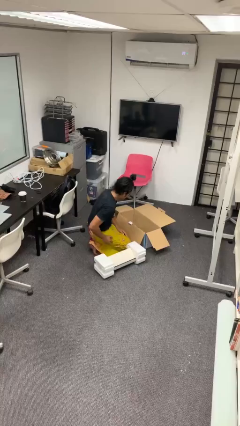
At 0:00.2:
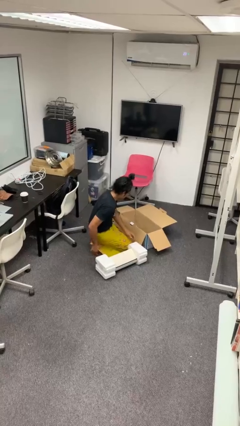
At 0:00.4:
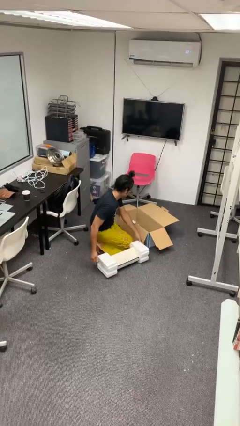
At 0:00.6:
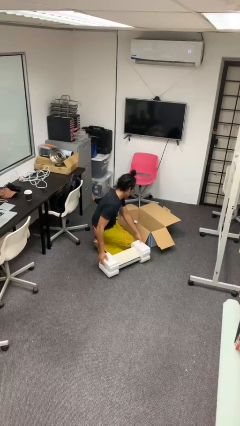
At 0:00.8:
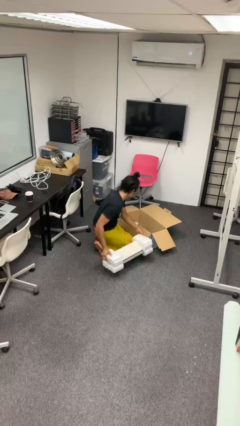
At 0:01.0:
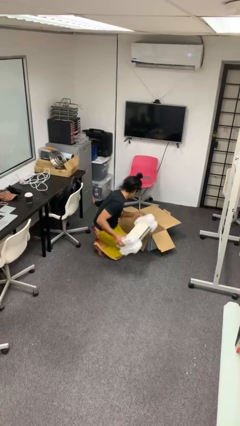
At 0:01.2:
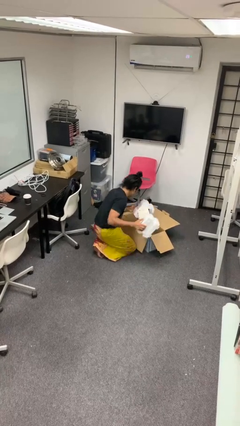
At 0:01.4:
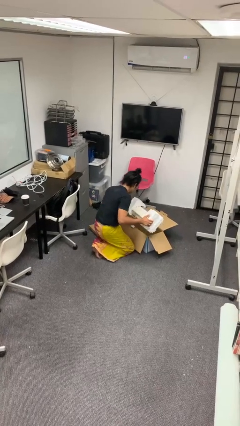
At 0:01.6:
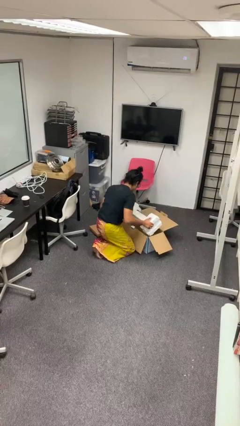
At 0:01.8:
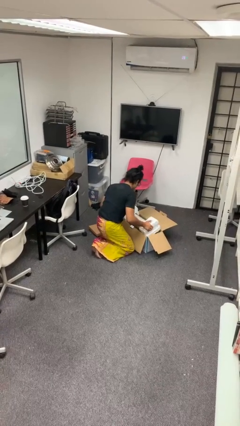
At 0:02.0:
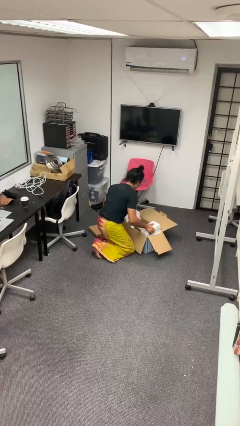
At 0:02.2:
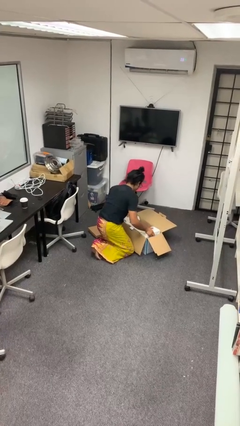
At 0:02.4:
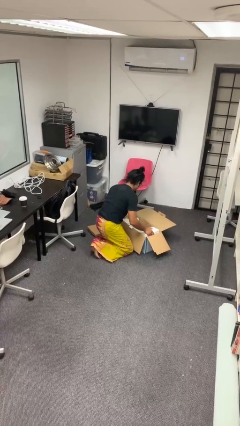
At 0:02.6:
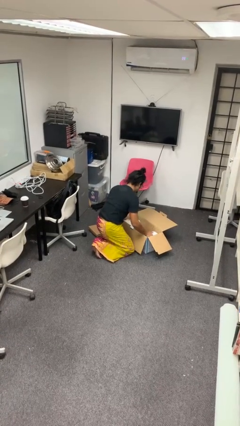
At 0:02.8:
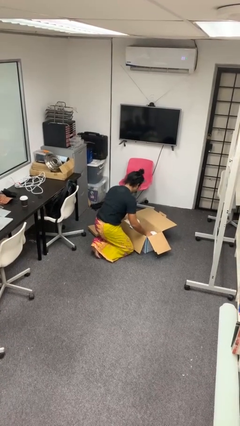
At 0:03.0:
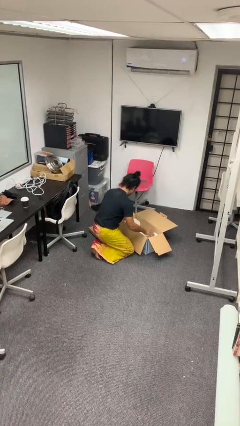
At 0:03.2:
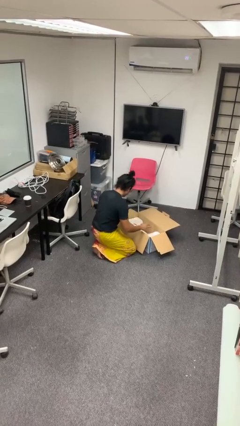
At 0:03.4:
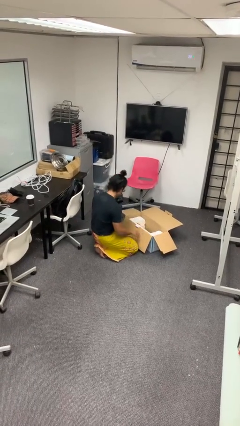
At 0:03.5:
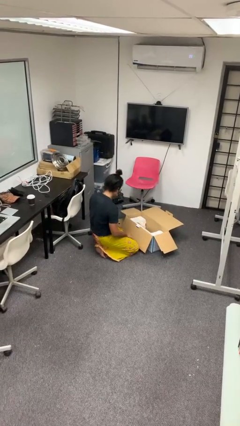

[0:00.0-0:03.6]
person puts object into box

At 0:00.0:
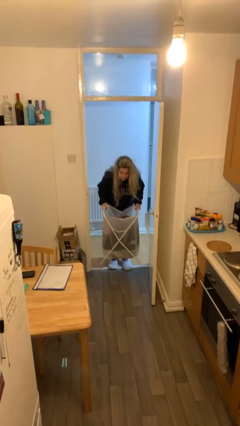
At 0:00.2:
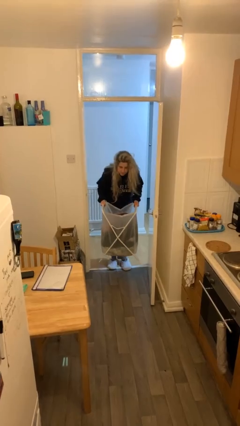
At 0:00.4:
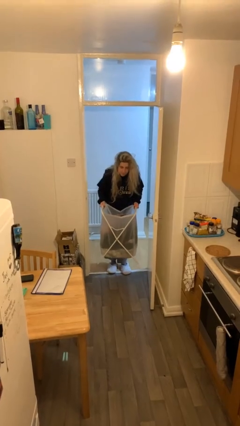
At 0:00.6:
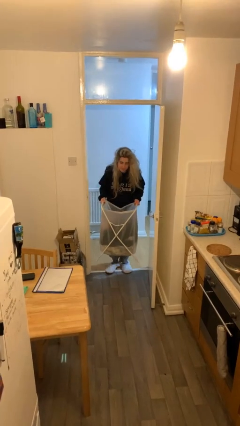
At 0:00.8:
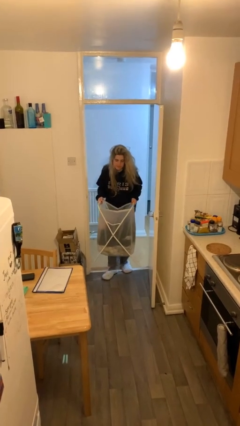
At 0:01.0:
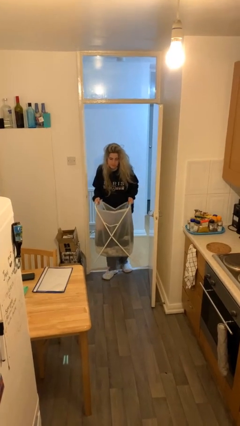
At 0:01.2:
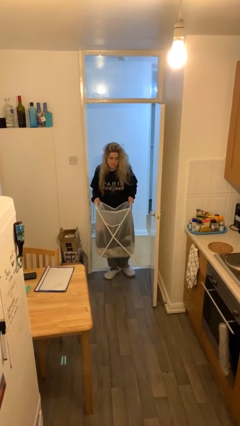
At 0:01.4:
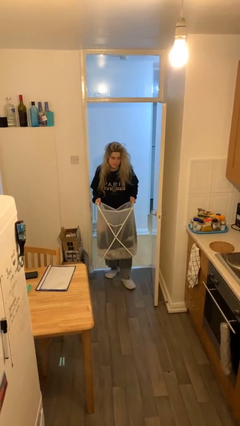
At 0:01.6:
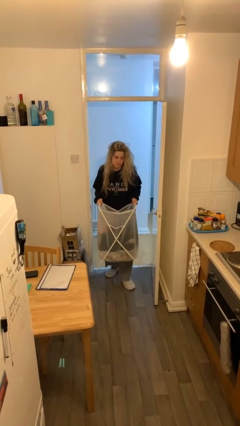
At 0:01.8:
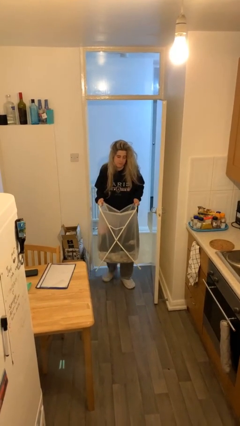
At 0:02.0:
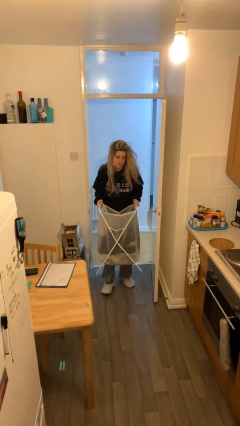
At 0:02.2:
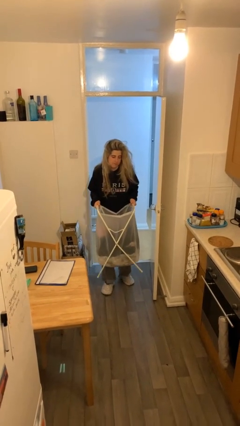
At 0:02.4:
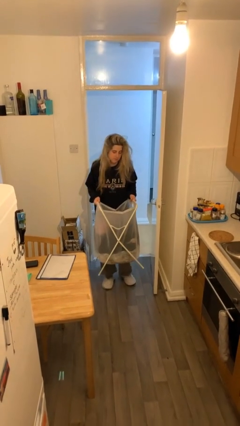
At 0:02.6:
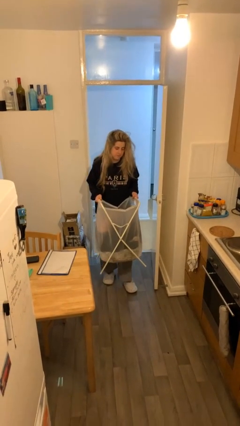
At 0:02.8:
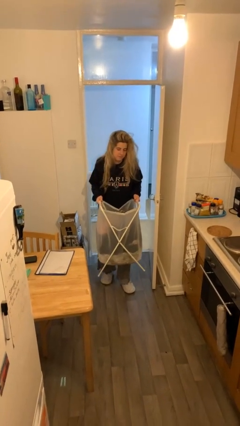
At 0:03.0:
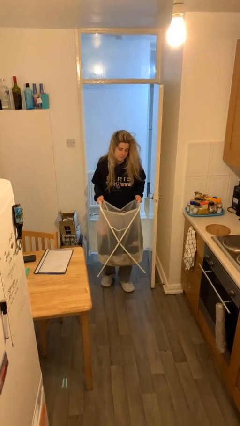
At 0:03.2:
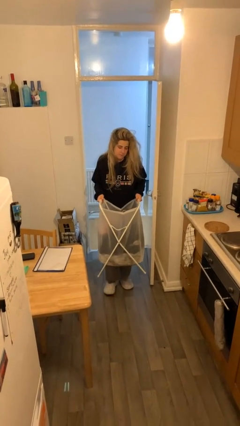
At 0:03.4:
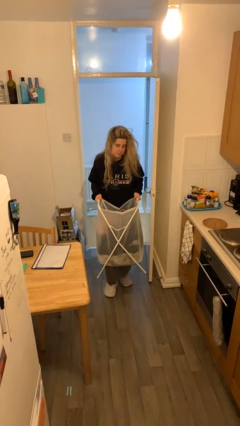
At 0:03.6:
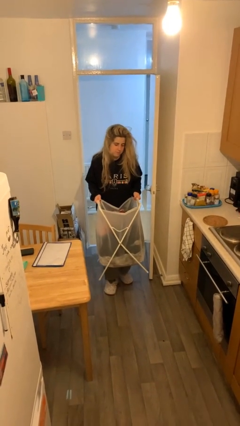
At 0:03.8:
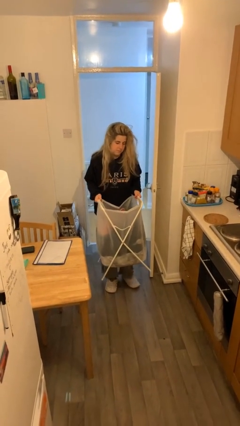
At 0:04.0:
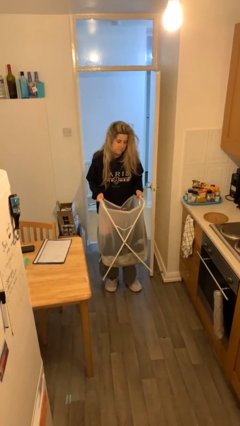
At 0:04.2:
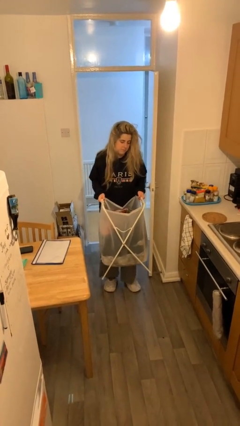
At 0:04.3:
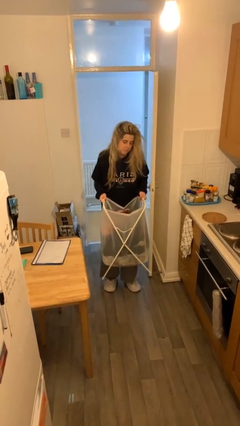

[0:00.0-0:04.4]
person carries heavy object

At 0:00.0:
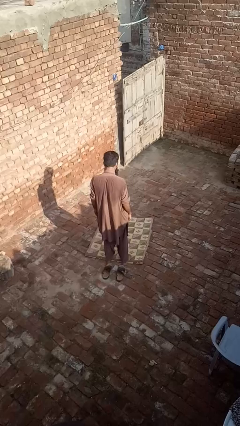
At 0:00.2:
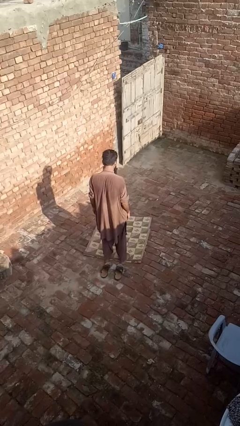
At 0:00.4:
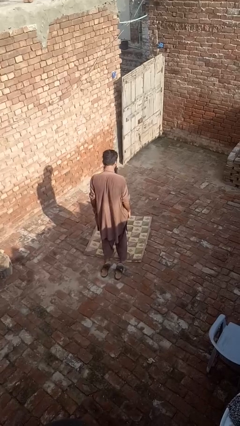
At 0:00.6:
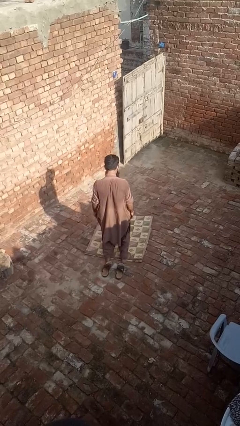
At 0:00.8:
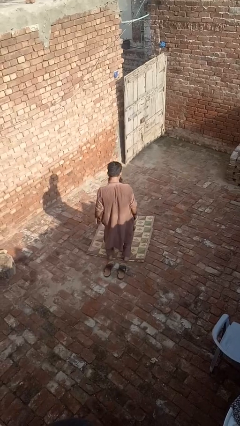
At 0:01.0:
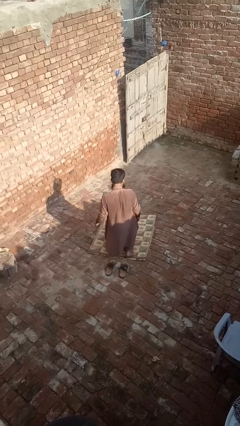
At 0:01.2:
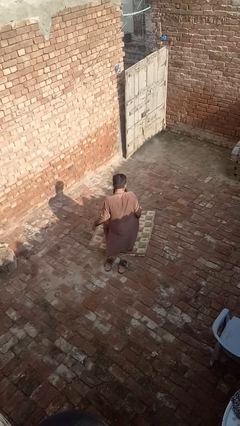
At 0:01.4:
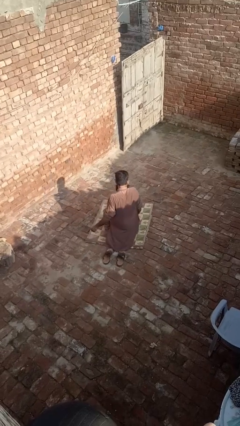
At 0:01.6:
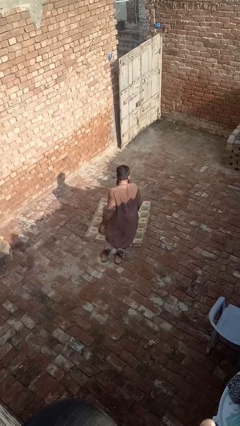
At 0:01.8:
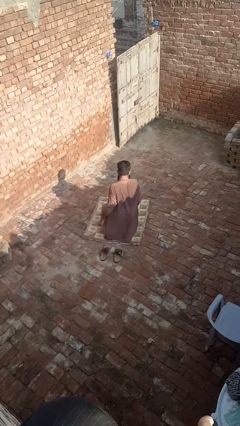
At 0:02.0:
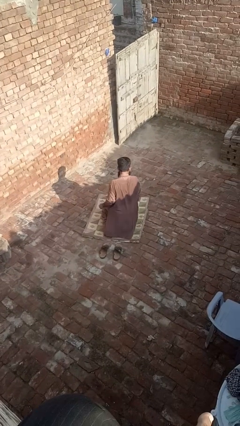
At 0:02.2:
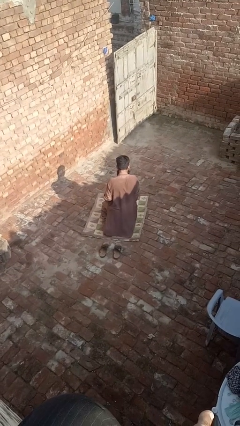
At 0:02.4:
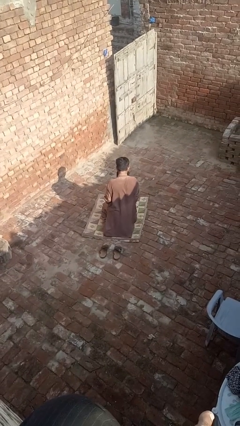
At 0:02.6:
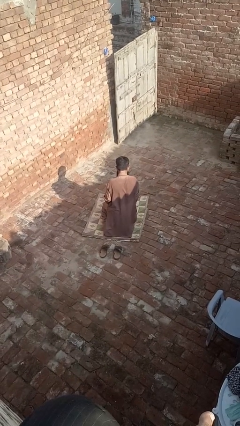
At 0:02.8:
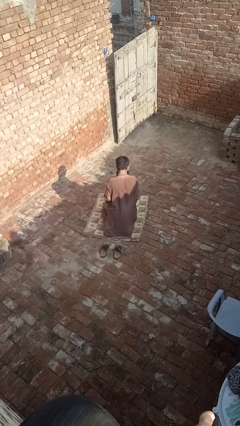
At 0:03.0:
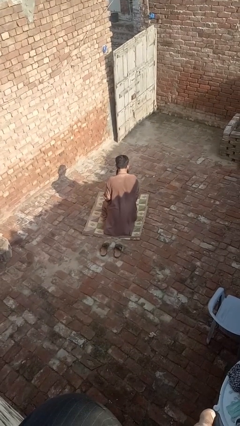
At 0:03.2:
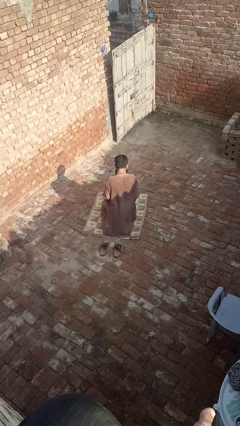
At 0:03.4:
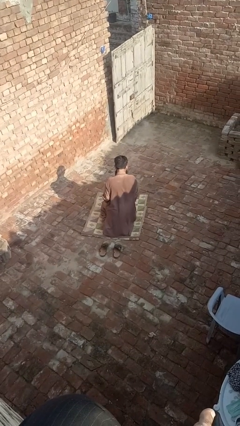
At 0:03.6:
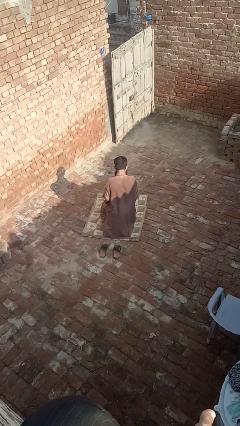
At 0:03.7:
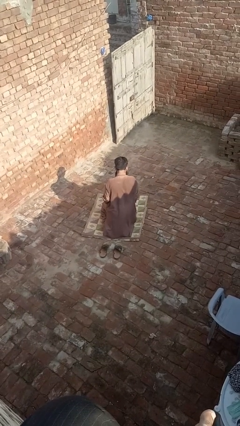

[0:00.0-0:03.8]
person kneels

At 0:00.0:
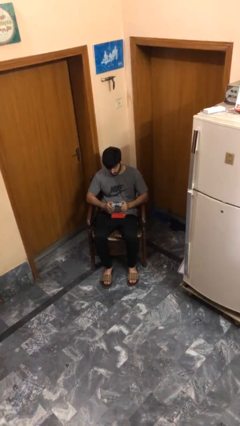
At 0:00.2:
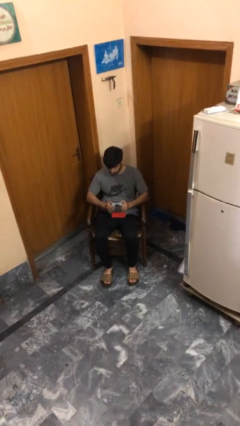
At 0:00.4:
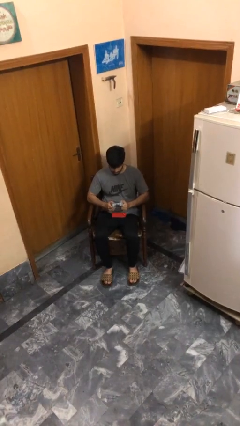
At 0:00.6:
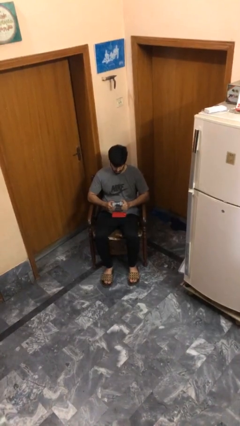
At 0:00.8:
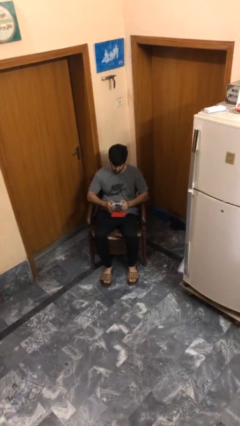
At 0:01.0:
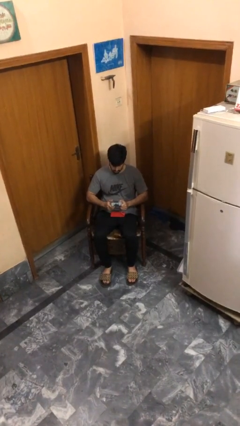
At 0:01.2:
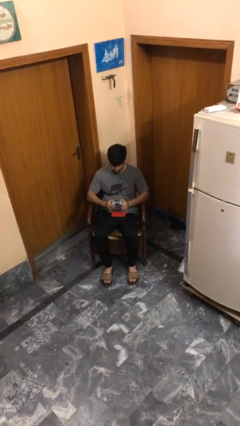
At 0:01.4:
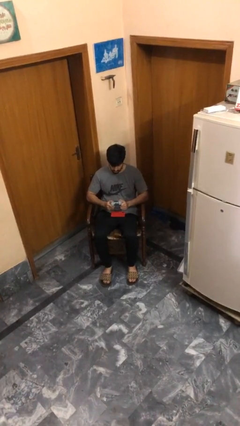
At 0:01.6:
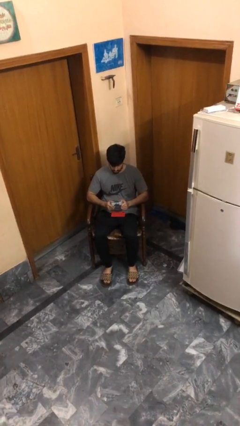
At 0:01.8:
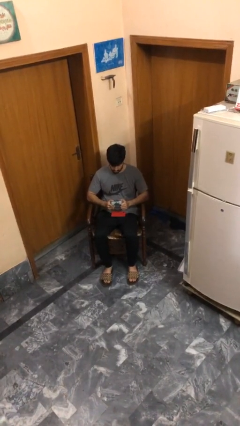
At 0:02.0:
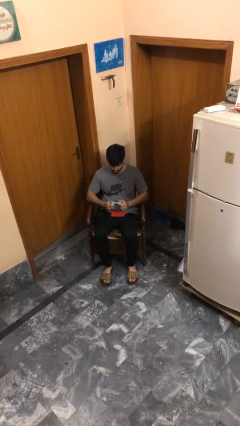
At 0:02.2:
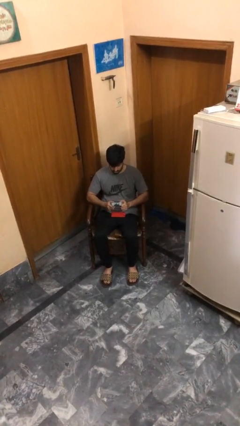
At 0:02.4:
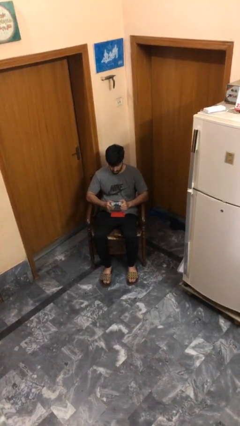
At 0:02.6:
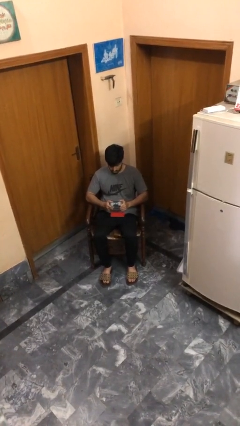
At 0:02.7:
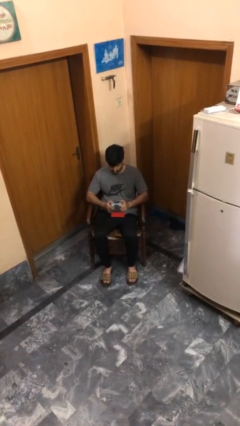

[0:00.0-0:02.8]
person interacts with handheld game

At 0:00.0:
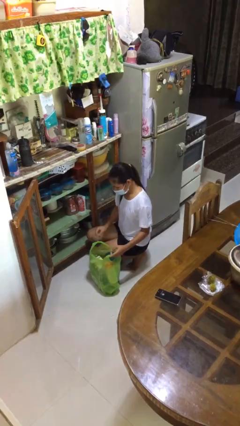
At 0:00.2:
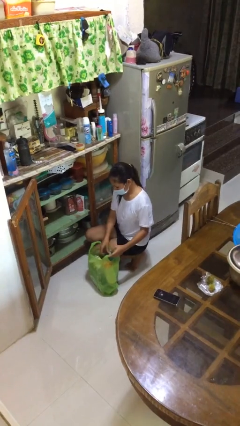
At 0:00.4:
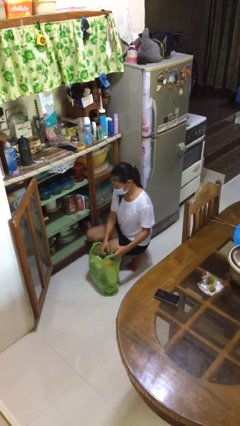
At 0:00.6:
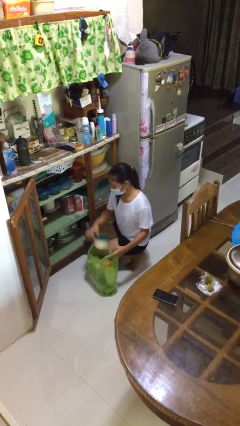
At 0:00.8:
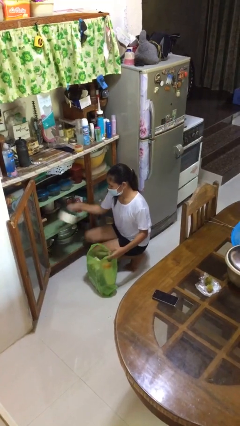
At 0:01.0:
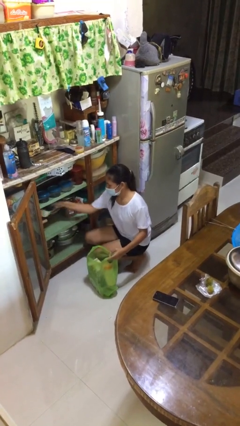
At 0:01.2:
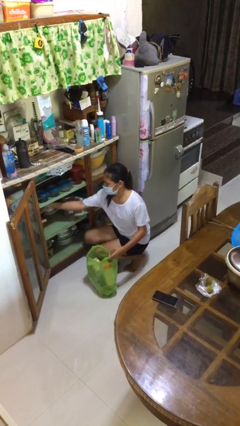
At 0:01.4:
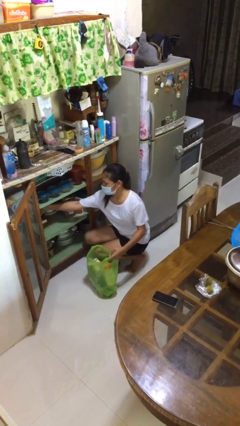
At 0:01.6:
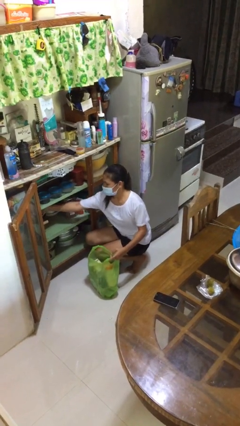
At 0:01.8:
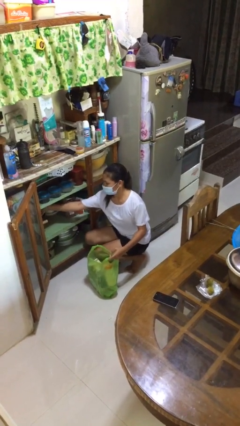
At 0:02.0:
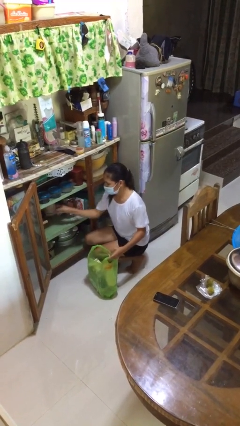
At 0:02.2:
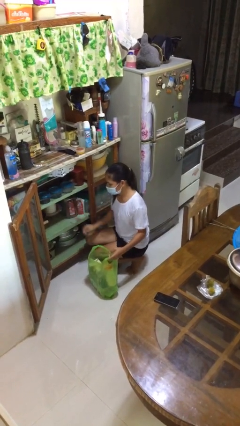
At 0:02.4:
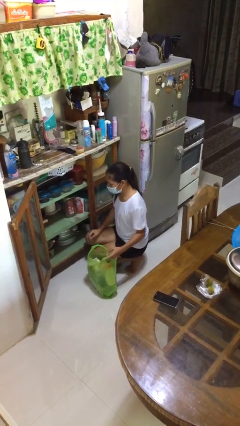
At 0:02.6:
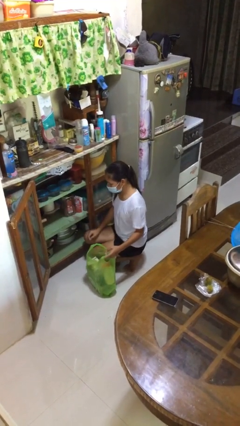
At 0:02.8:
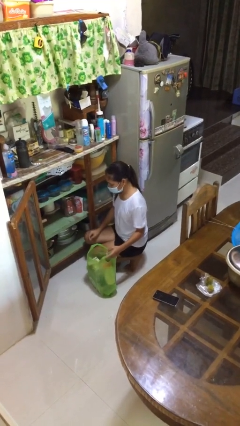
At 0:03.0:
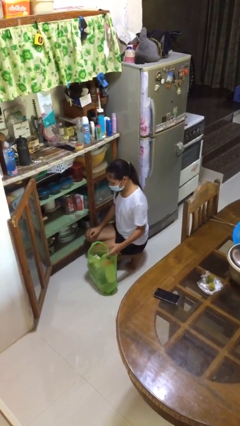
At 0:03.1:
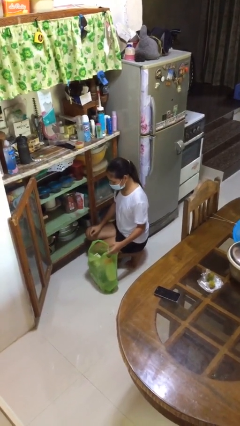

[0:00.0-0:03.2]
person loads groceries into cabinet
